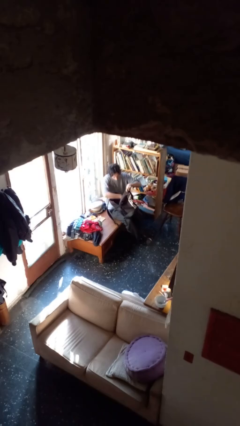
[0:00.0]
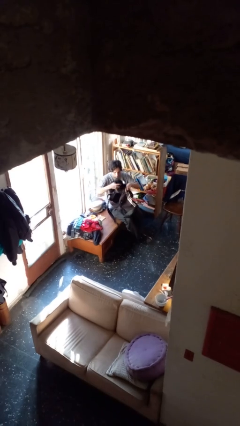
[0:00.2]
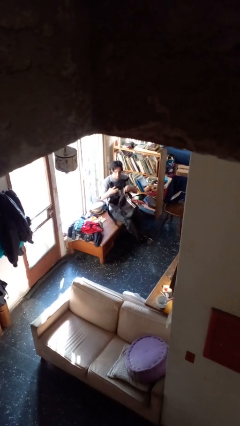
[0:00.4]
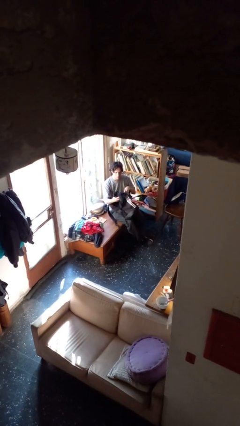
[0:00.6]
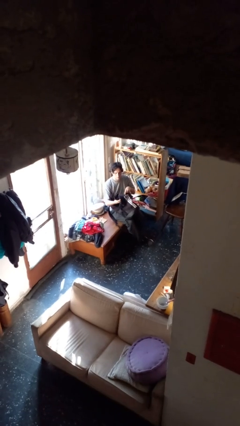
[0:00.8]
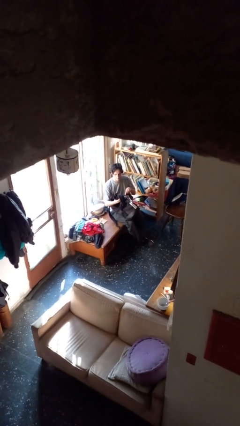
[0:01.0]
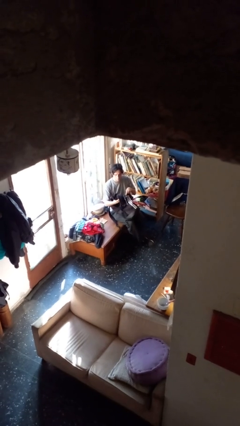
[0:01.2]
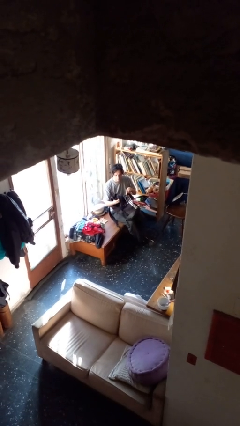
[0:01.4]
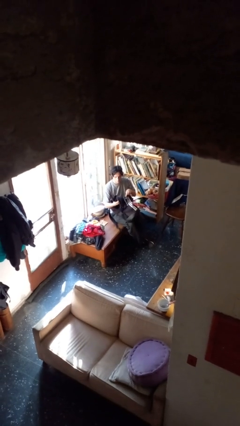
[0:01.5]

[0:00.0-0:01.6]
person takes object from backpack

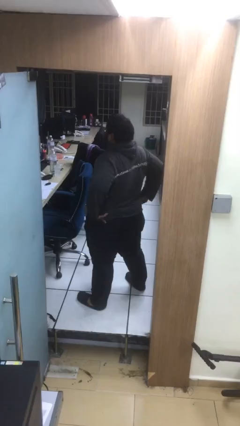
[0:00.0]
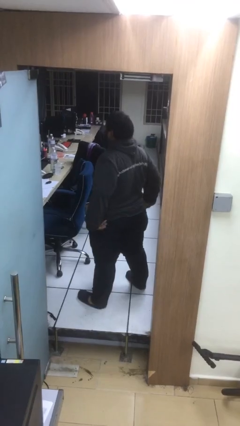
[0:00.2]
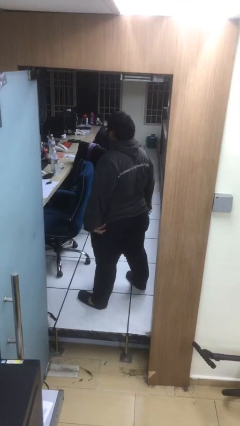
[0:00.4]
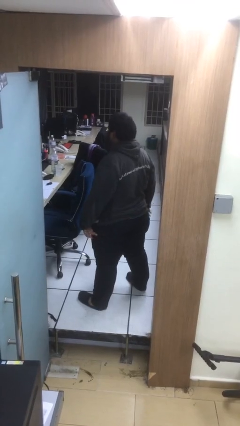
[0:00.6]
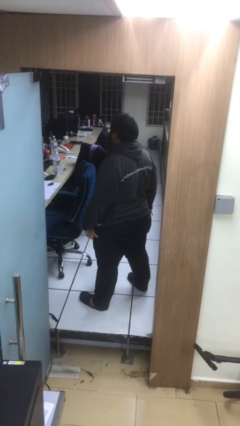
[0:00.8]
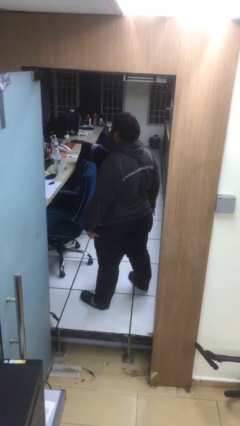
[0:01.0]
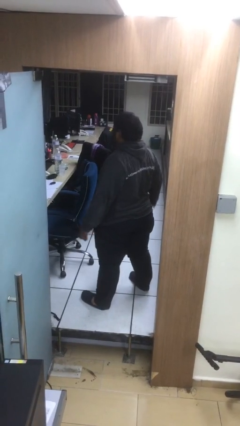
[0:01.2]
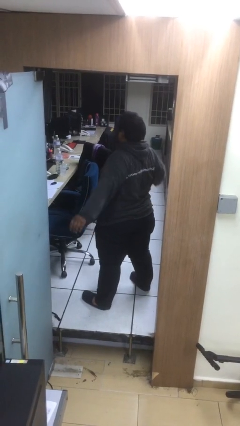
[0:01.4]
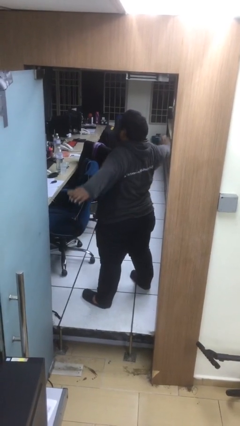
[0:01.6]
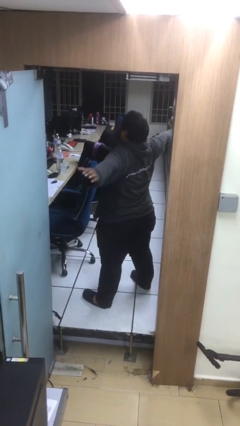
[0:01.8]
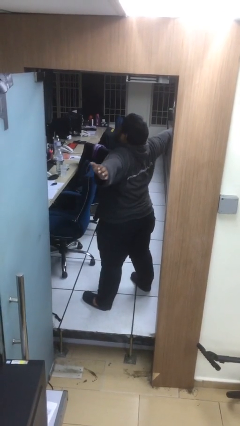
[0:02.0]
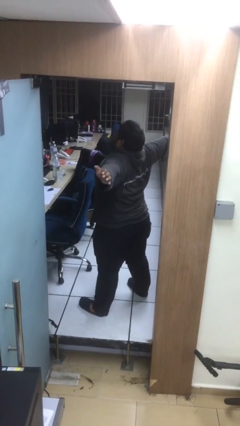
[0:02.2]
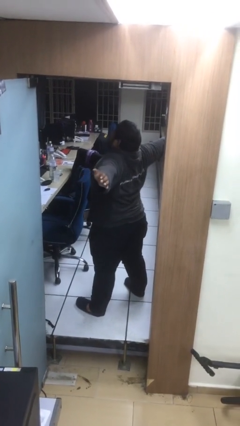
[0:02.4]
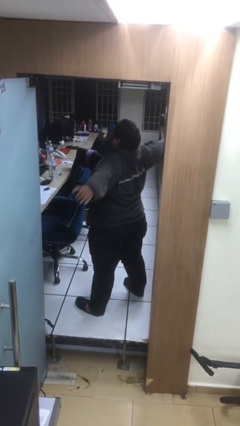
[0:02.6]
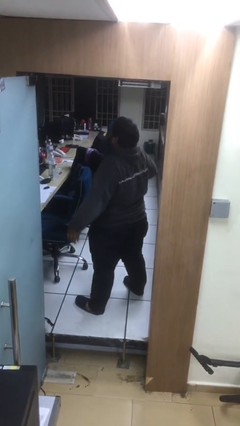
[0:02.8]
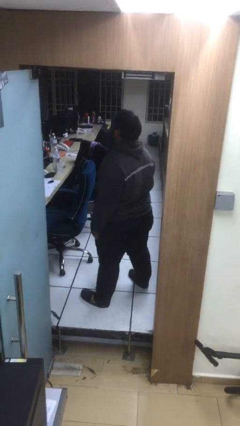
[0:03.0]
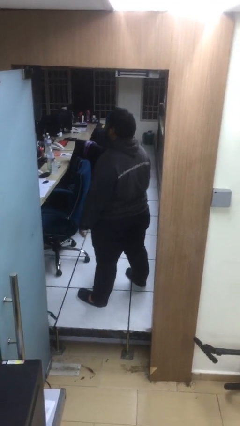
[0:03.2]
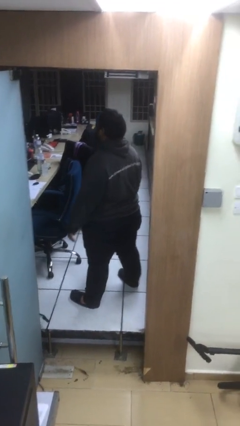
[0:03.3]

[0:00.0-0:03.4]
person stretches arms to side

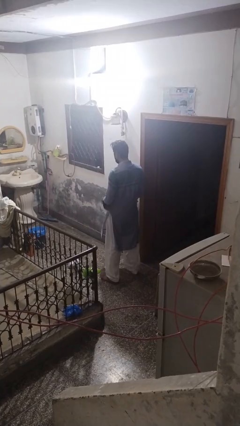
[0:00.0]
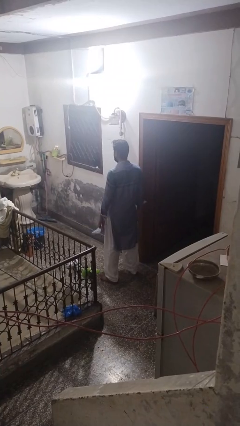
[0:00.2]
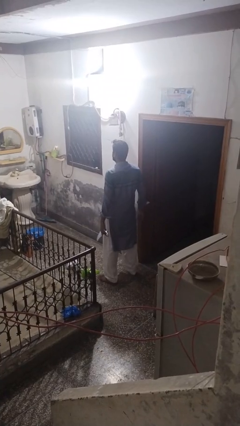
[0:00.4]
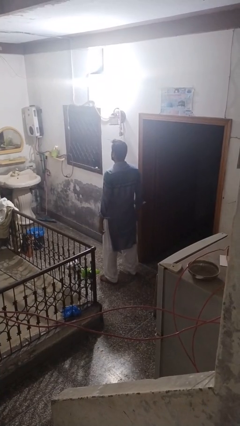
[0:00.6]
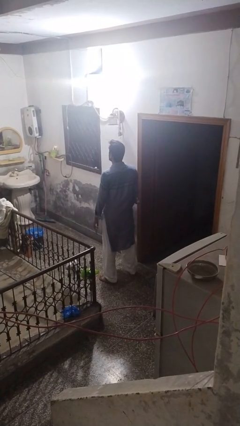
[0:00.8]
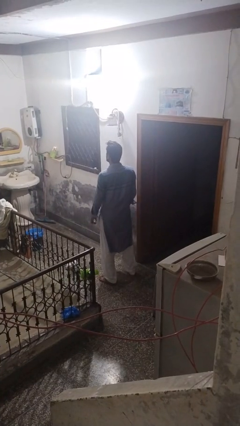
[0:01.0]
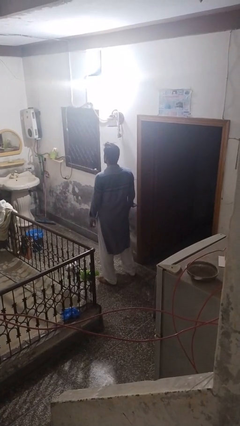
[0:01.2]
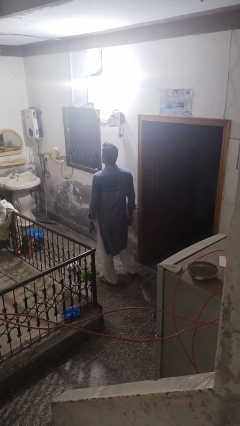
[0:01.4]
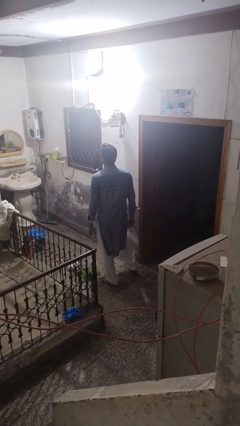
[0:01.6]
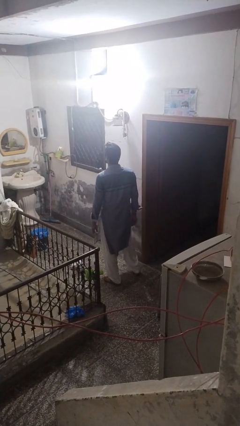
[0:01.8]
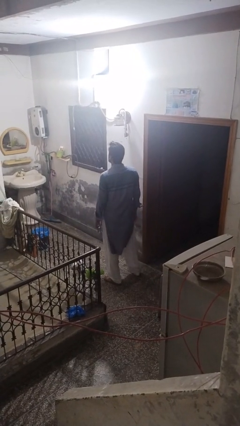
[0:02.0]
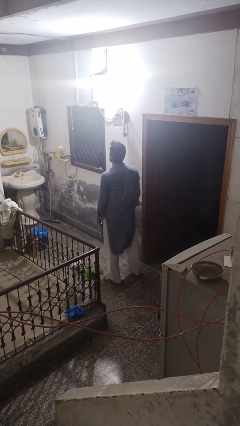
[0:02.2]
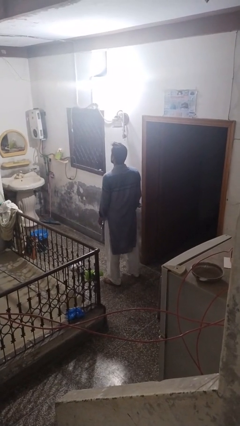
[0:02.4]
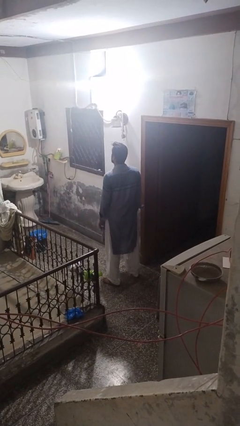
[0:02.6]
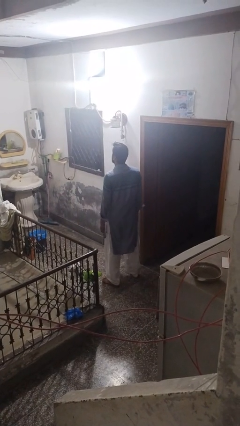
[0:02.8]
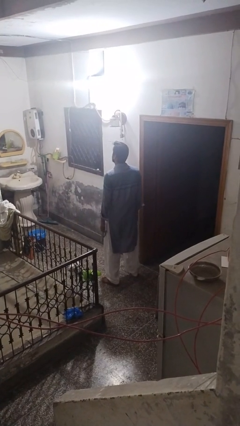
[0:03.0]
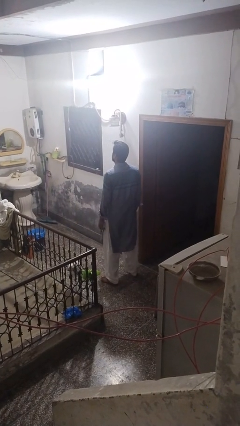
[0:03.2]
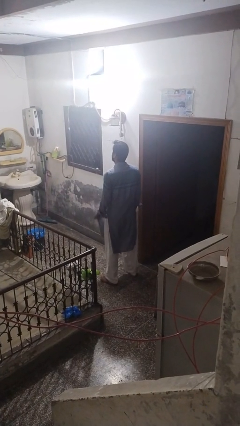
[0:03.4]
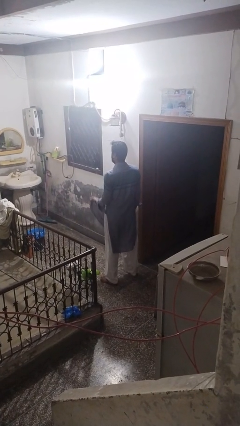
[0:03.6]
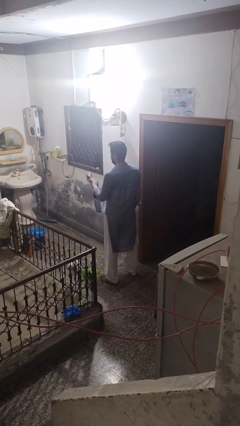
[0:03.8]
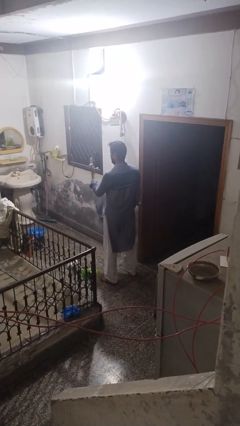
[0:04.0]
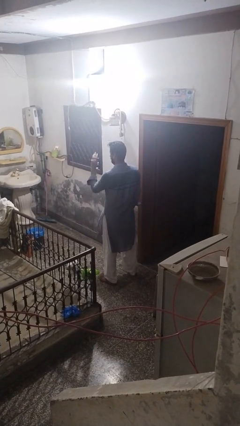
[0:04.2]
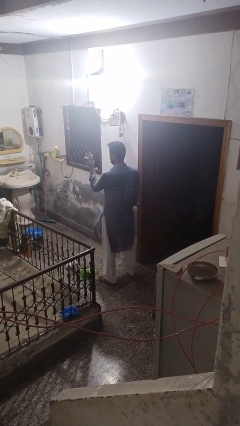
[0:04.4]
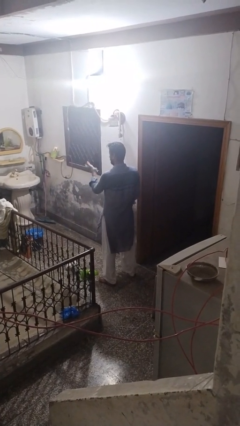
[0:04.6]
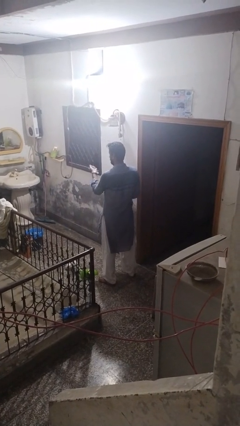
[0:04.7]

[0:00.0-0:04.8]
person washes hands

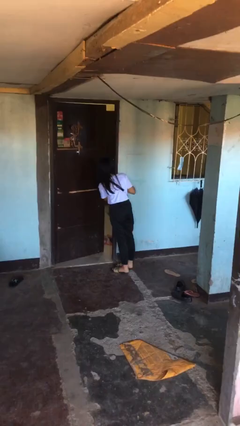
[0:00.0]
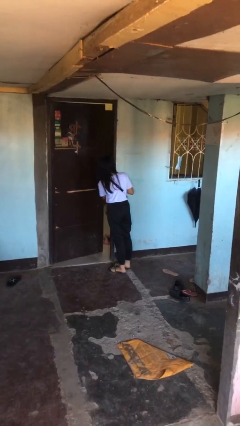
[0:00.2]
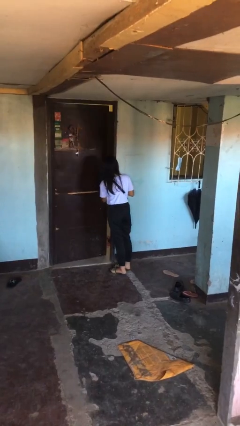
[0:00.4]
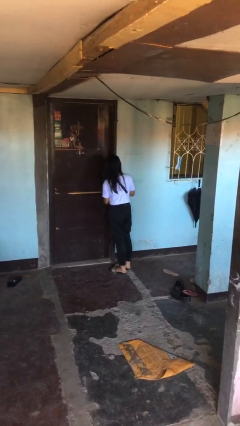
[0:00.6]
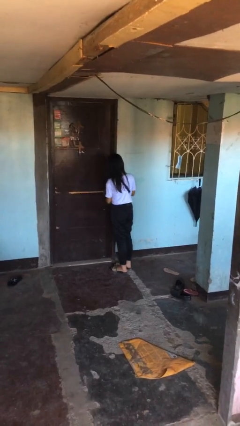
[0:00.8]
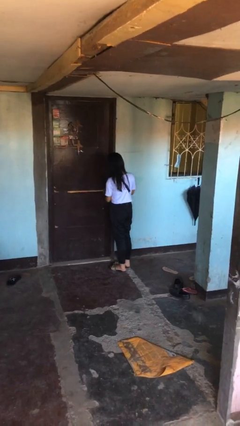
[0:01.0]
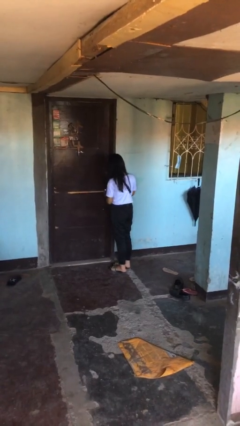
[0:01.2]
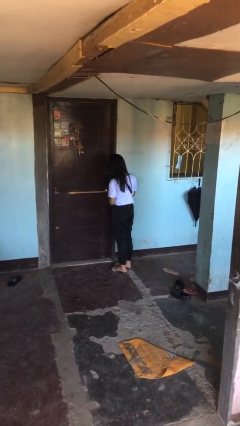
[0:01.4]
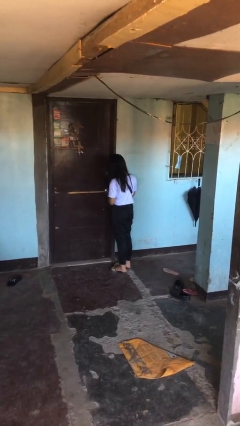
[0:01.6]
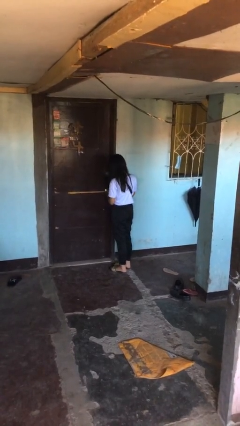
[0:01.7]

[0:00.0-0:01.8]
person closes facility door

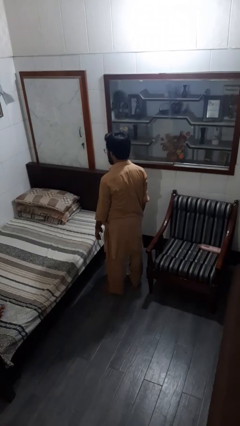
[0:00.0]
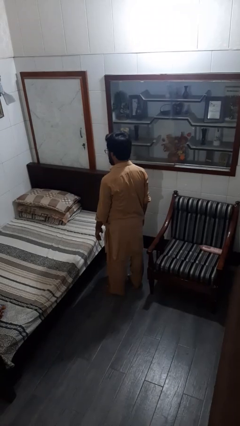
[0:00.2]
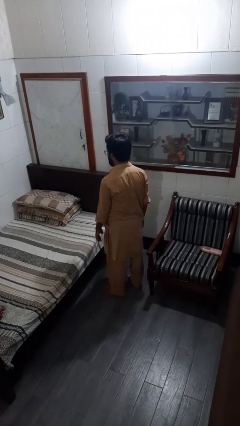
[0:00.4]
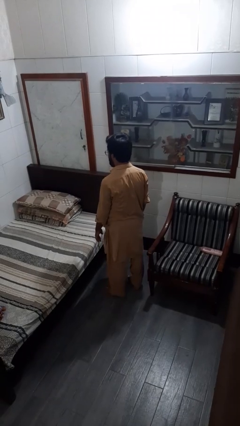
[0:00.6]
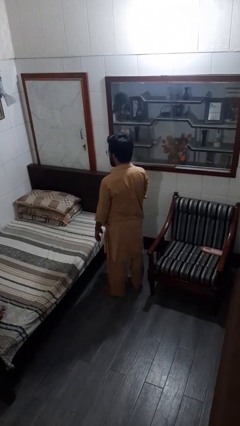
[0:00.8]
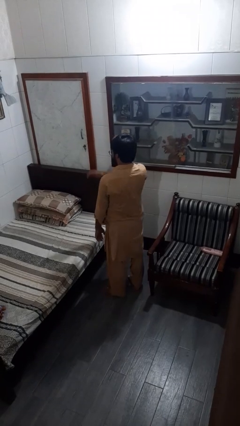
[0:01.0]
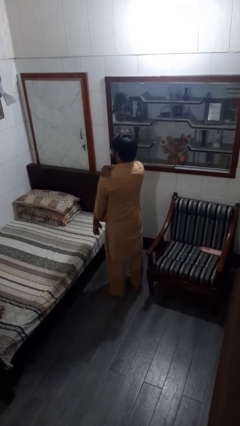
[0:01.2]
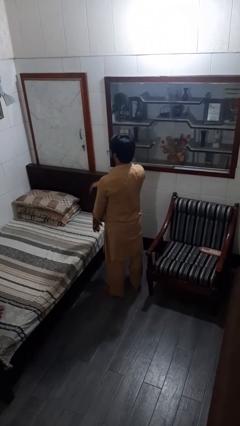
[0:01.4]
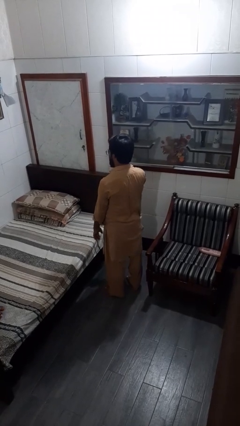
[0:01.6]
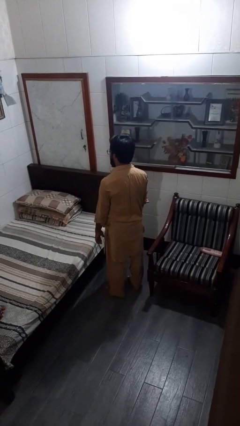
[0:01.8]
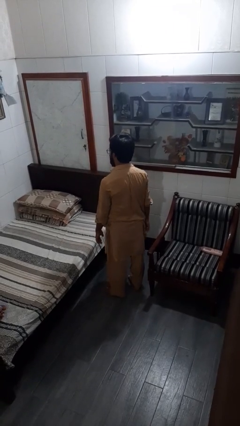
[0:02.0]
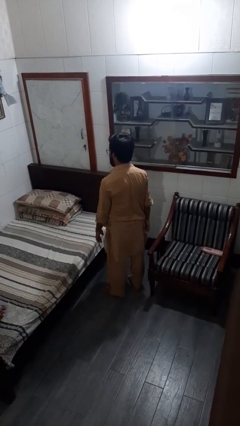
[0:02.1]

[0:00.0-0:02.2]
person swats bug

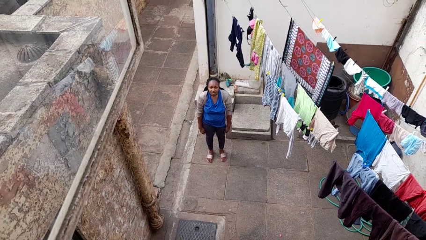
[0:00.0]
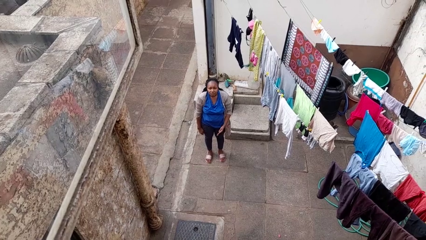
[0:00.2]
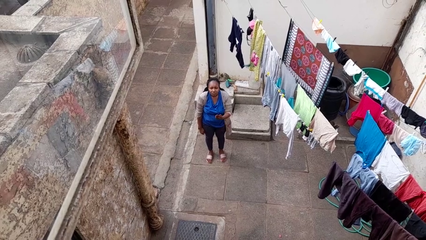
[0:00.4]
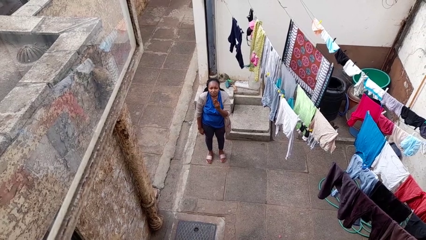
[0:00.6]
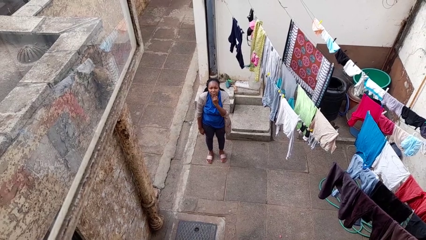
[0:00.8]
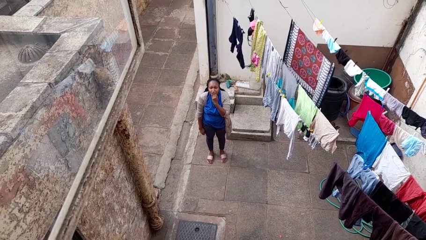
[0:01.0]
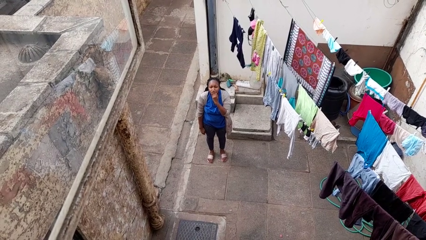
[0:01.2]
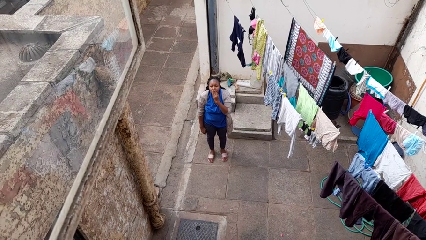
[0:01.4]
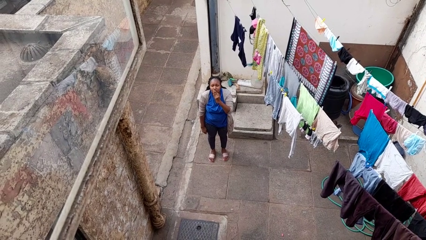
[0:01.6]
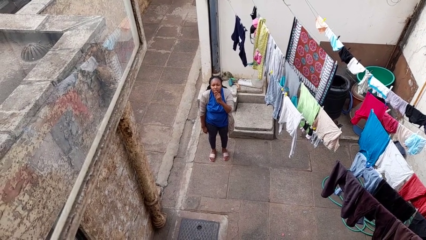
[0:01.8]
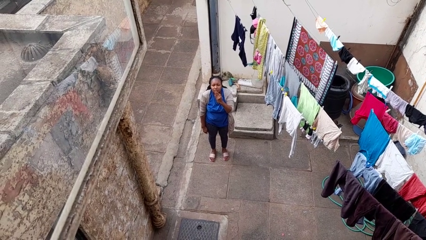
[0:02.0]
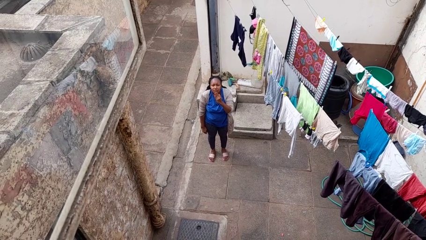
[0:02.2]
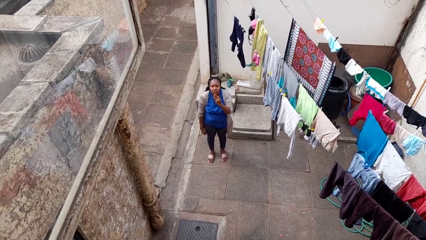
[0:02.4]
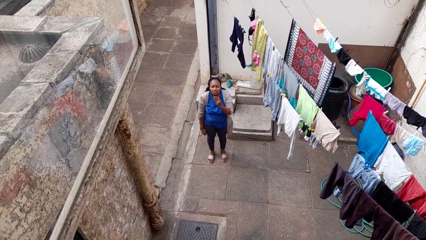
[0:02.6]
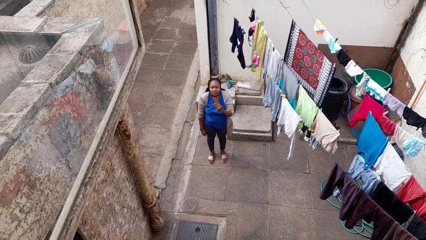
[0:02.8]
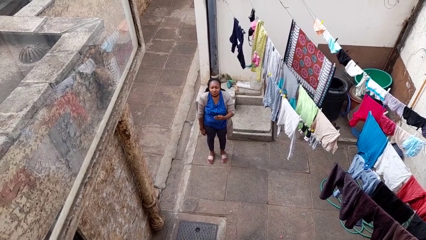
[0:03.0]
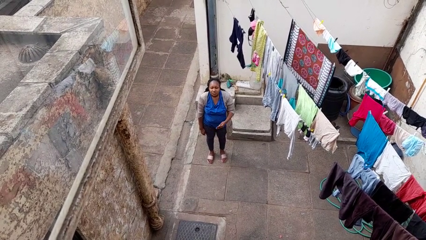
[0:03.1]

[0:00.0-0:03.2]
person gestures blow kiss
